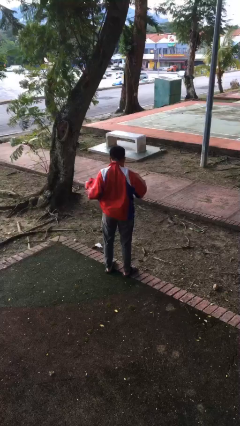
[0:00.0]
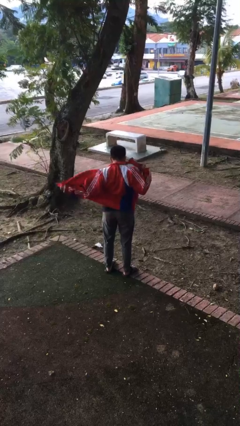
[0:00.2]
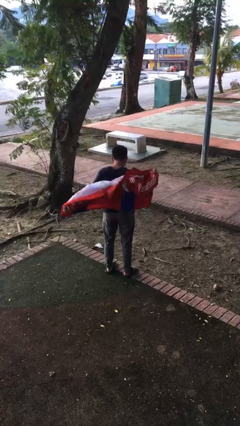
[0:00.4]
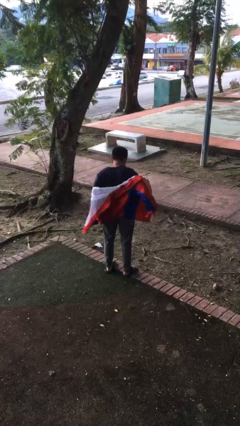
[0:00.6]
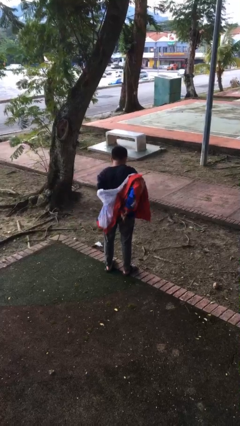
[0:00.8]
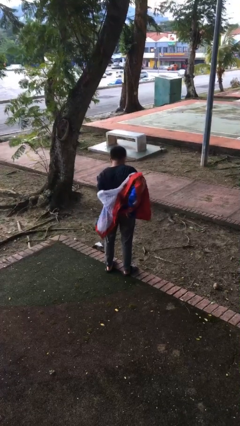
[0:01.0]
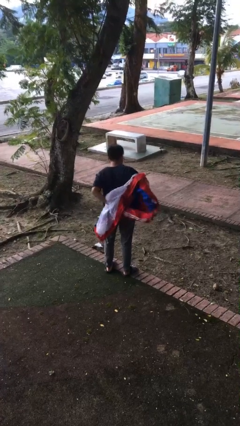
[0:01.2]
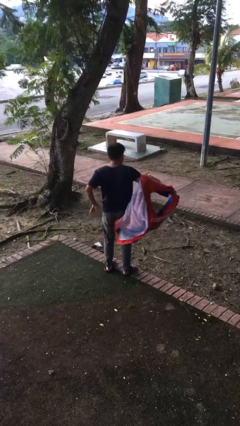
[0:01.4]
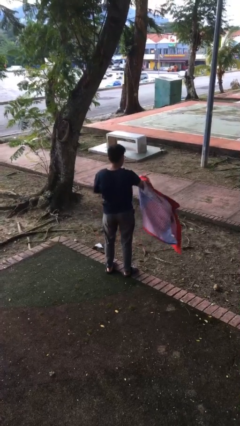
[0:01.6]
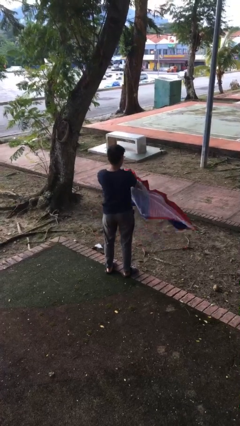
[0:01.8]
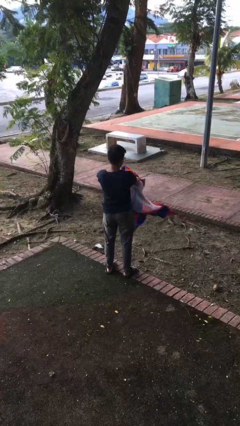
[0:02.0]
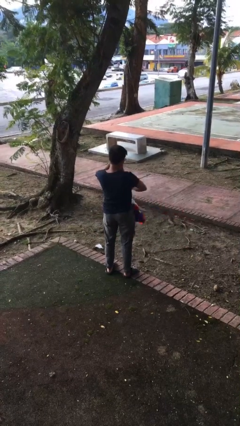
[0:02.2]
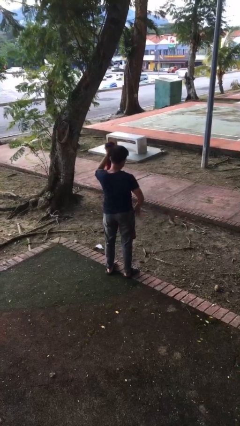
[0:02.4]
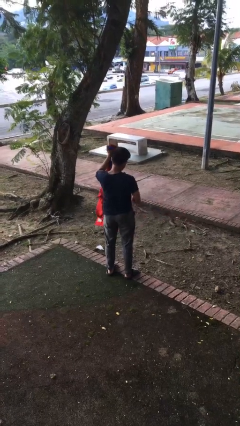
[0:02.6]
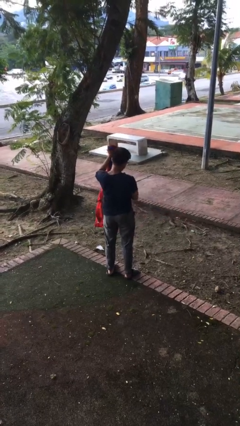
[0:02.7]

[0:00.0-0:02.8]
person takes off jacket

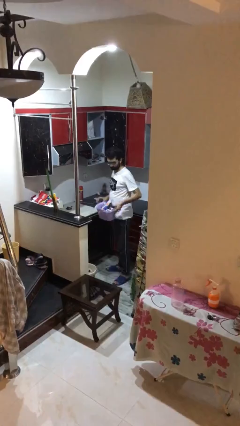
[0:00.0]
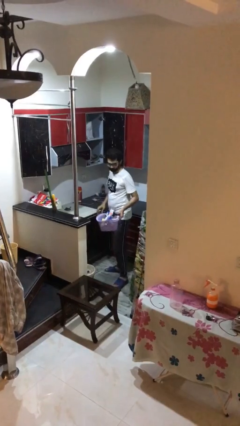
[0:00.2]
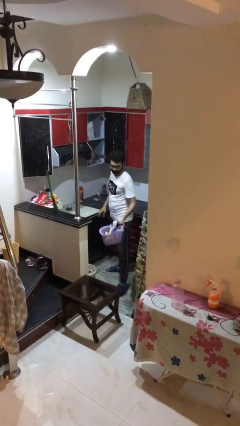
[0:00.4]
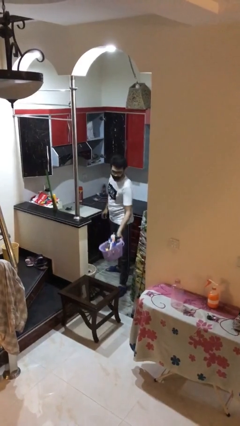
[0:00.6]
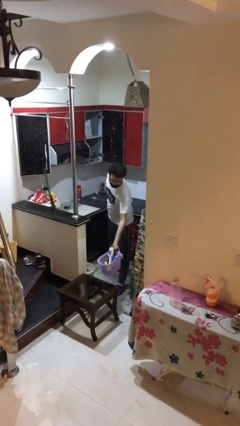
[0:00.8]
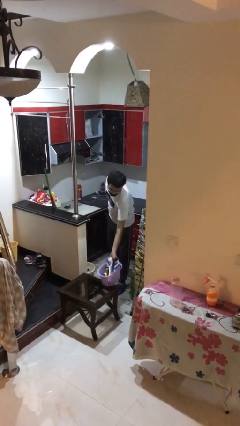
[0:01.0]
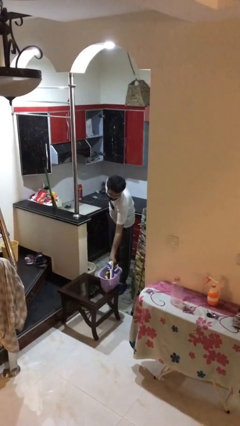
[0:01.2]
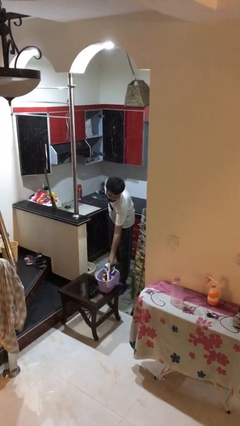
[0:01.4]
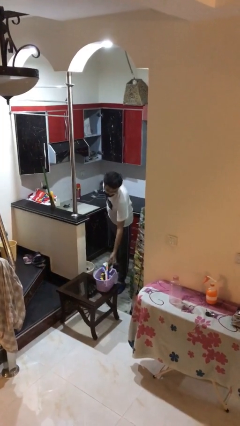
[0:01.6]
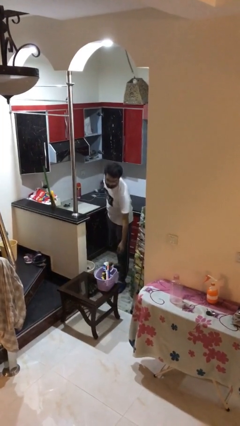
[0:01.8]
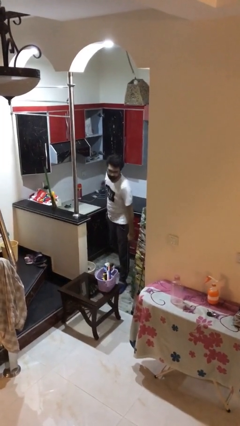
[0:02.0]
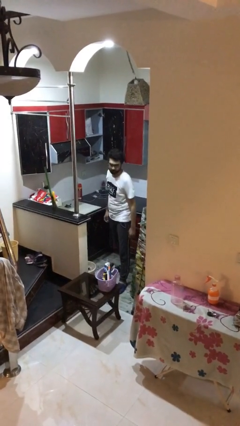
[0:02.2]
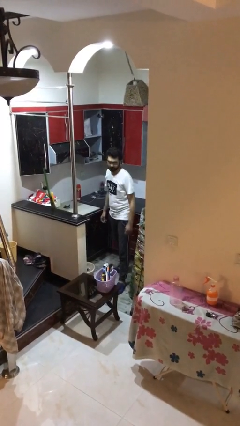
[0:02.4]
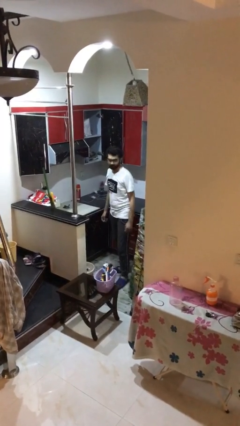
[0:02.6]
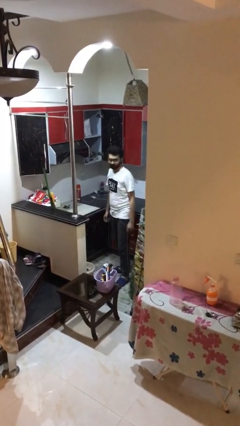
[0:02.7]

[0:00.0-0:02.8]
person puts down object on table

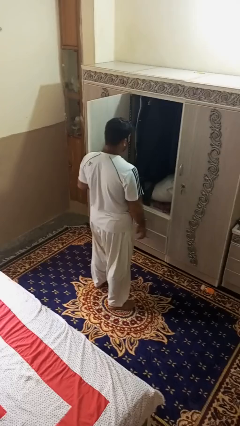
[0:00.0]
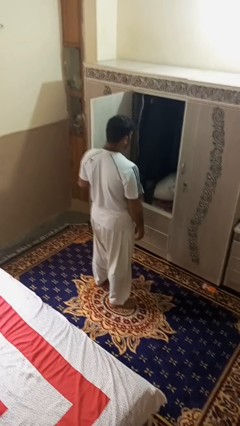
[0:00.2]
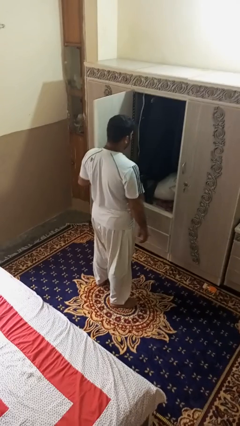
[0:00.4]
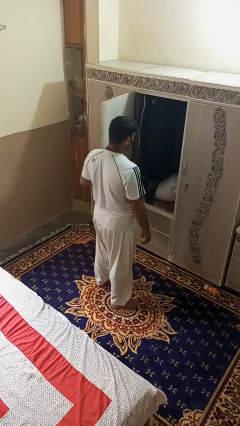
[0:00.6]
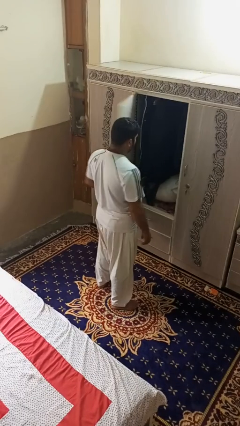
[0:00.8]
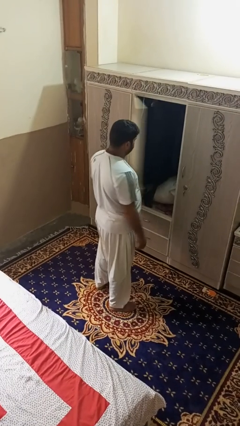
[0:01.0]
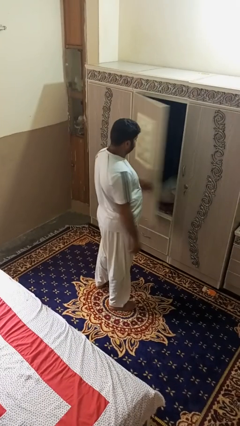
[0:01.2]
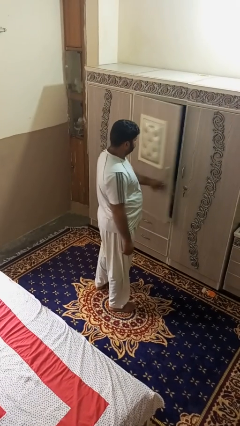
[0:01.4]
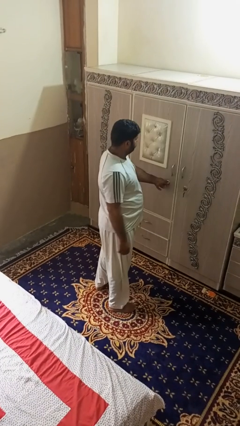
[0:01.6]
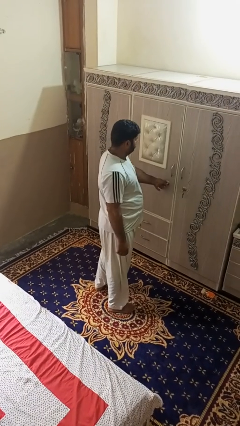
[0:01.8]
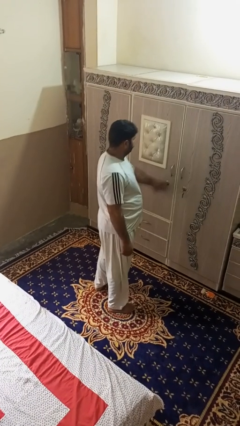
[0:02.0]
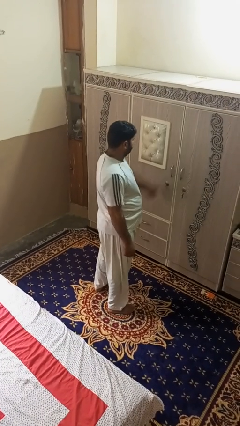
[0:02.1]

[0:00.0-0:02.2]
person closes dresser drawer

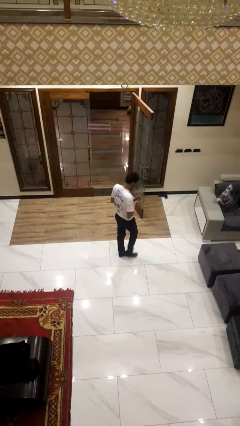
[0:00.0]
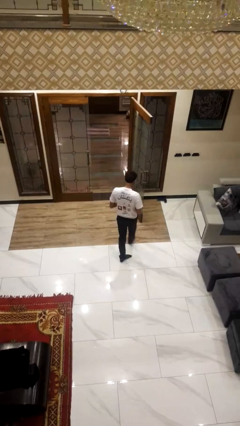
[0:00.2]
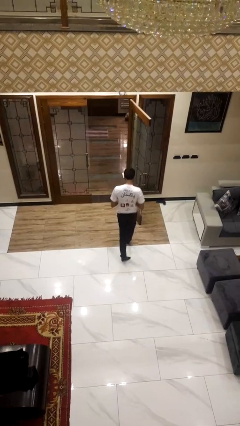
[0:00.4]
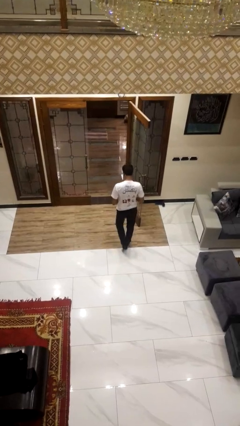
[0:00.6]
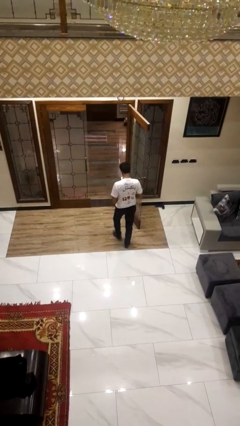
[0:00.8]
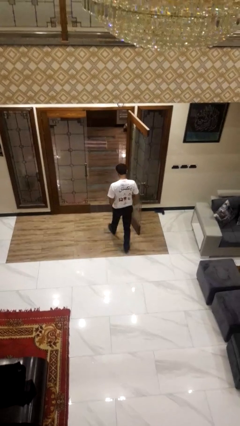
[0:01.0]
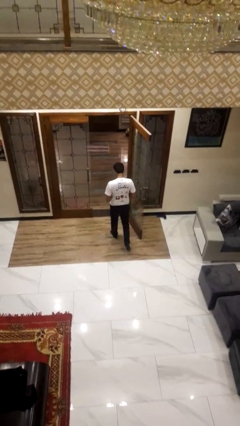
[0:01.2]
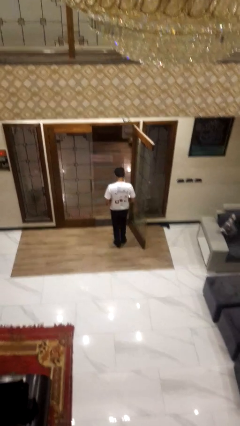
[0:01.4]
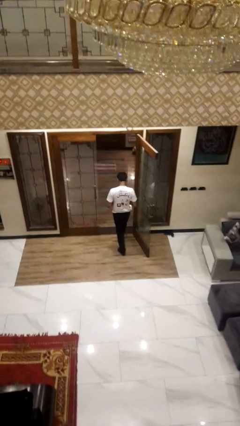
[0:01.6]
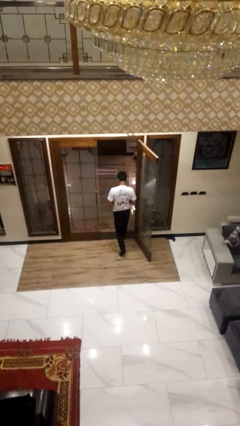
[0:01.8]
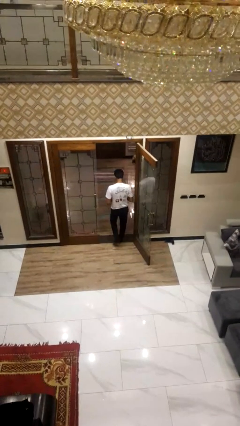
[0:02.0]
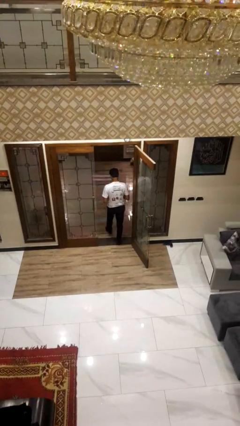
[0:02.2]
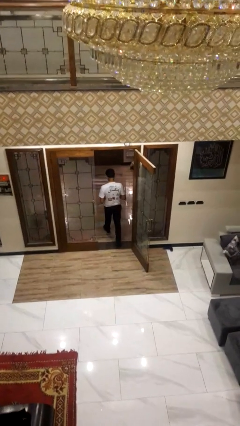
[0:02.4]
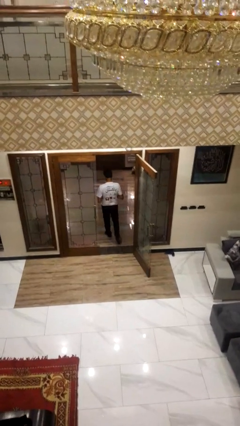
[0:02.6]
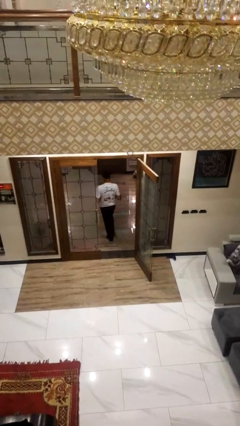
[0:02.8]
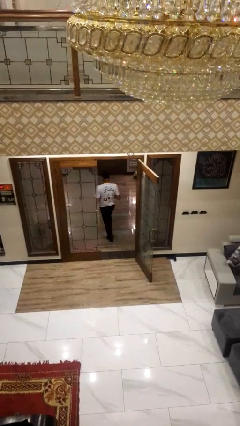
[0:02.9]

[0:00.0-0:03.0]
person exits scene through structure

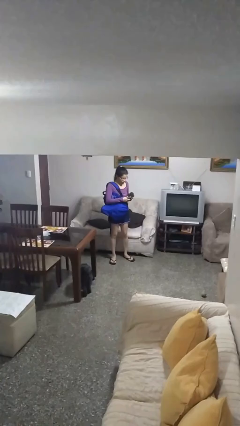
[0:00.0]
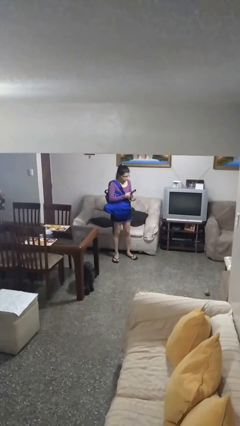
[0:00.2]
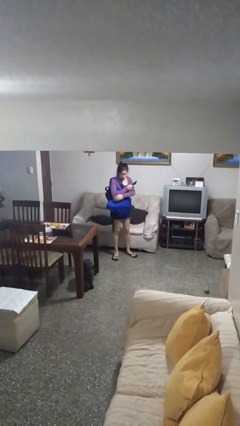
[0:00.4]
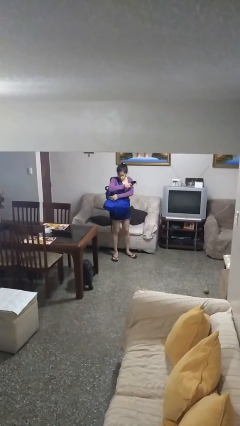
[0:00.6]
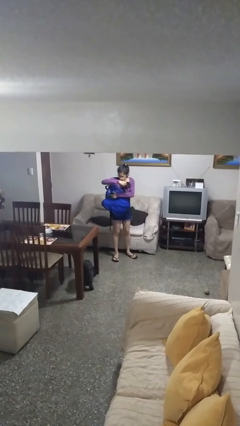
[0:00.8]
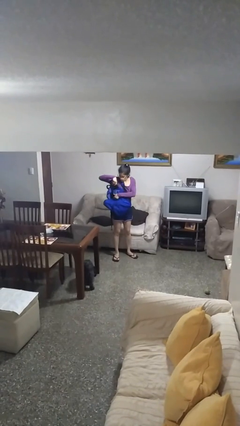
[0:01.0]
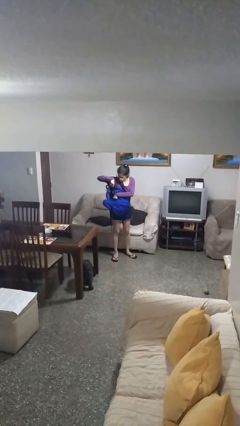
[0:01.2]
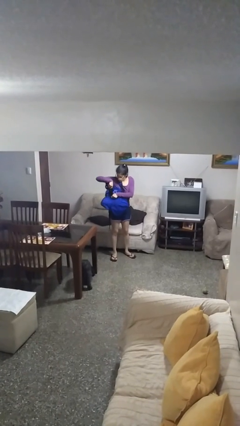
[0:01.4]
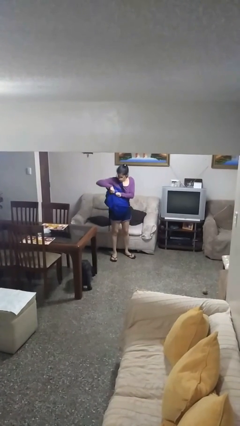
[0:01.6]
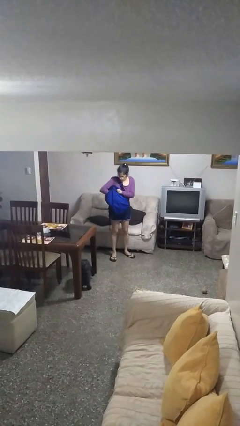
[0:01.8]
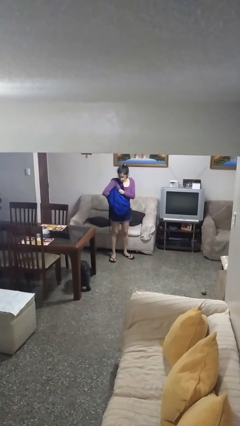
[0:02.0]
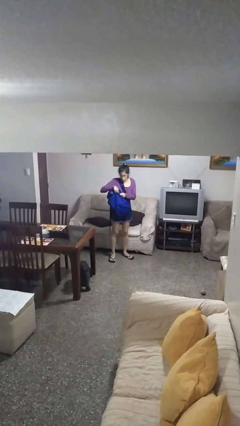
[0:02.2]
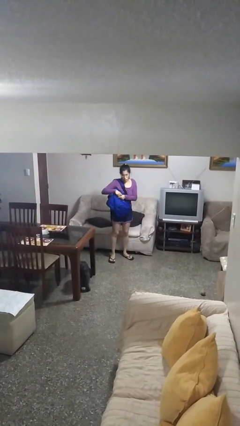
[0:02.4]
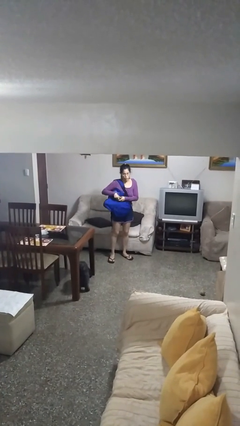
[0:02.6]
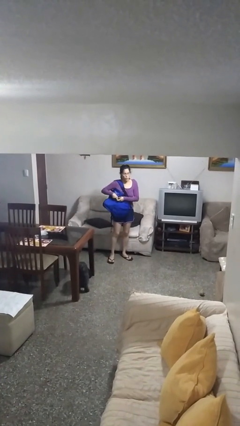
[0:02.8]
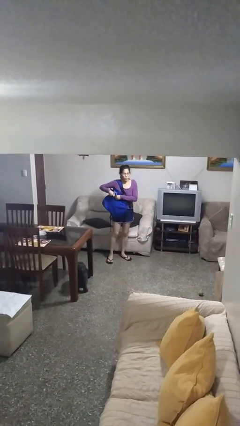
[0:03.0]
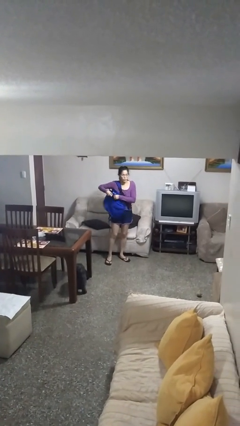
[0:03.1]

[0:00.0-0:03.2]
person puts object into backpack

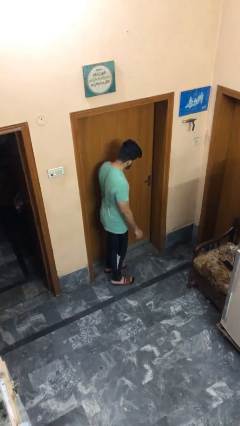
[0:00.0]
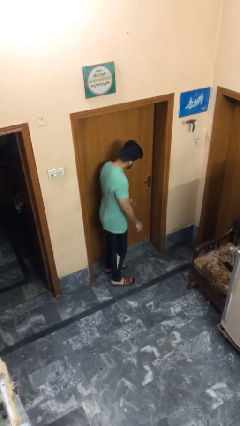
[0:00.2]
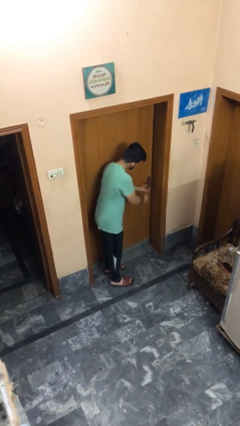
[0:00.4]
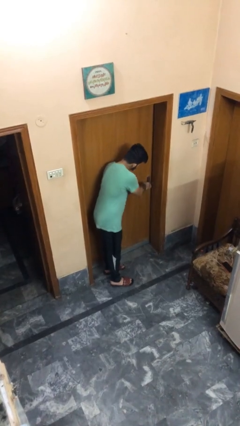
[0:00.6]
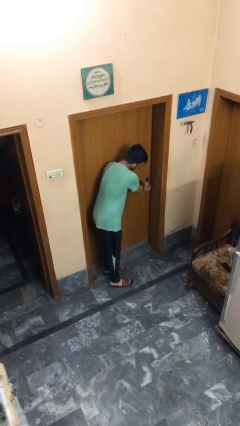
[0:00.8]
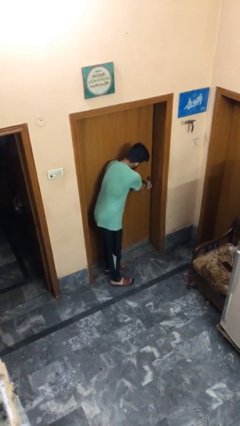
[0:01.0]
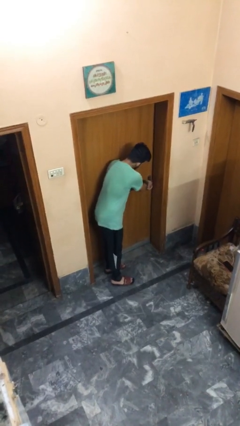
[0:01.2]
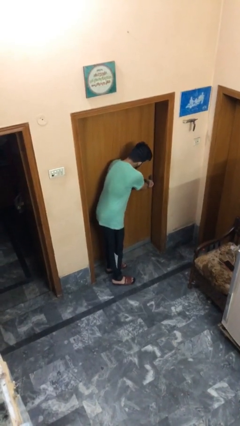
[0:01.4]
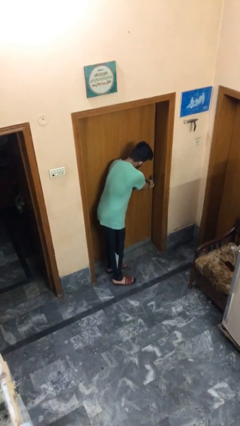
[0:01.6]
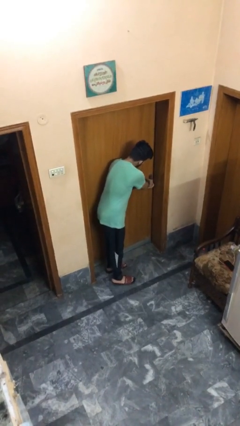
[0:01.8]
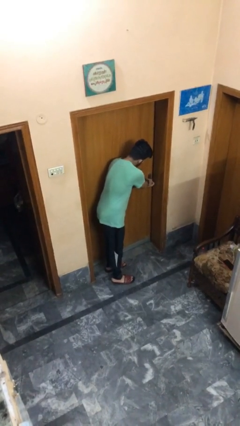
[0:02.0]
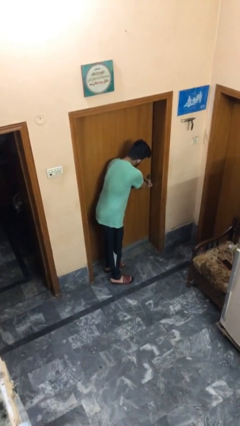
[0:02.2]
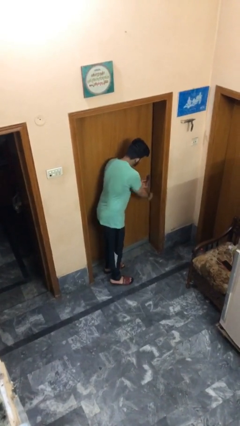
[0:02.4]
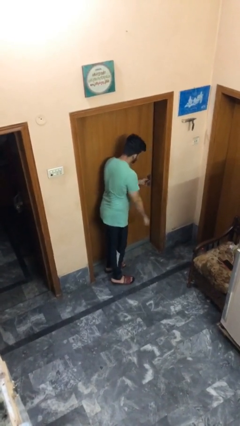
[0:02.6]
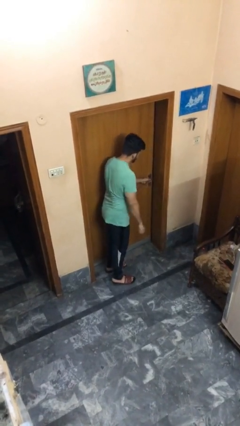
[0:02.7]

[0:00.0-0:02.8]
person unlocks door with keys

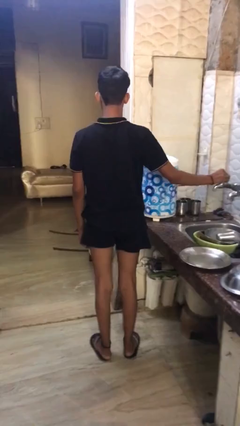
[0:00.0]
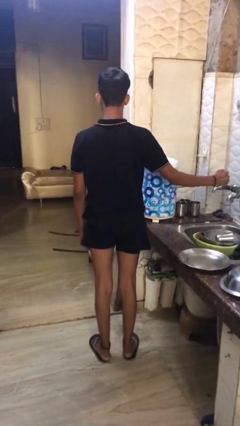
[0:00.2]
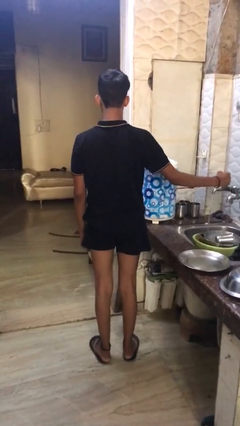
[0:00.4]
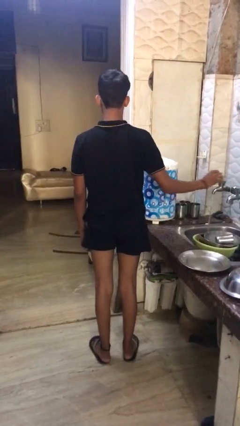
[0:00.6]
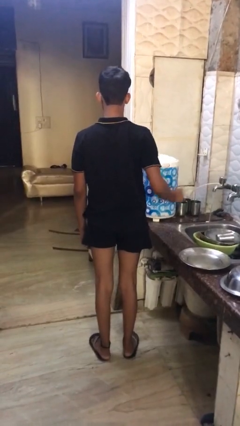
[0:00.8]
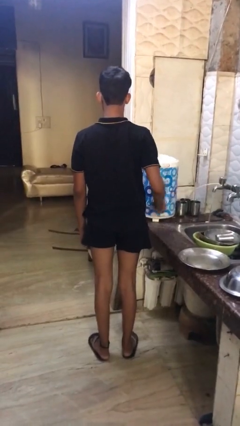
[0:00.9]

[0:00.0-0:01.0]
person turns on faucet
